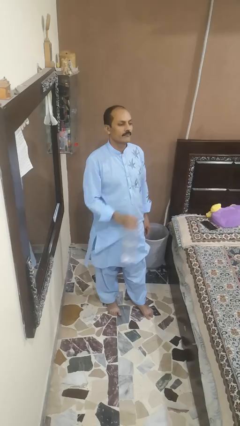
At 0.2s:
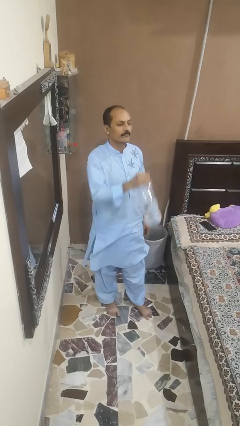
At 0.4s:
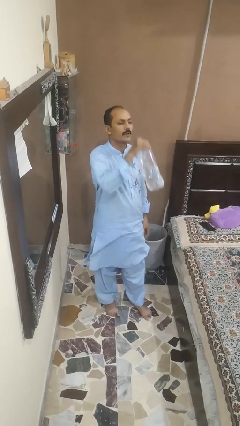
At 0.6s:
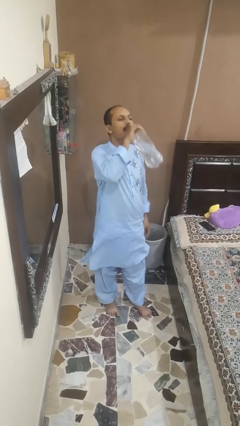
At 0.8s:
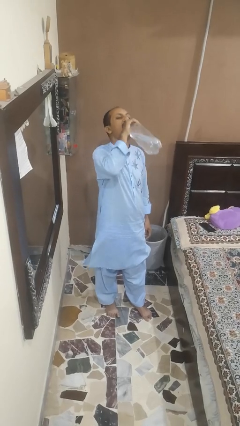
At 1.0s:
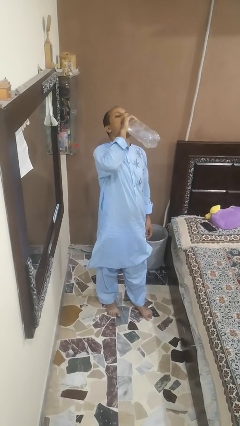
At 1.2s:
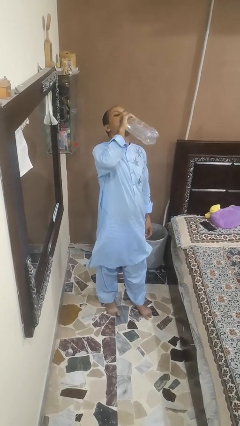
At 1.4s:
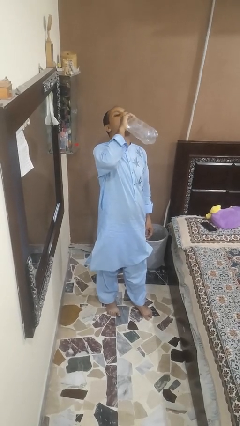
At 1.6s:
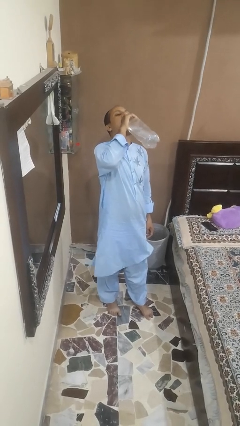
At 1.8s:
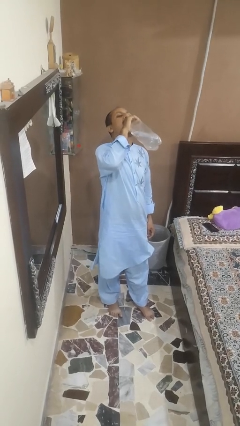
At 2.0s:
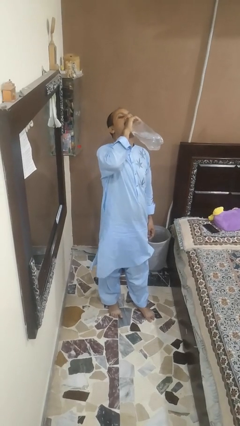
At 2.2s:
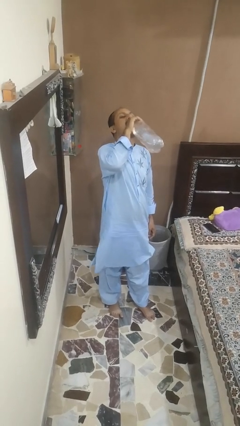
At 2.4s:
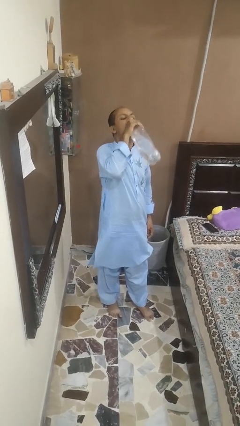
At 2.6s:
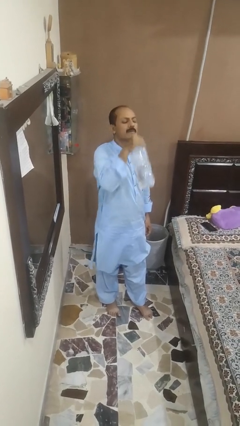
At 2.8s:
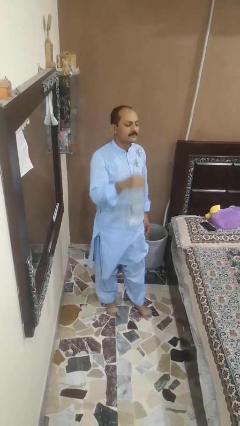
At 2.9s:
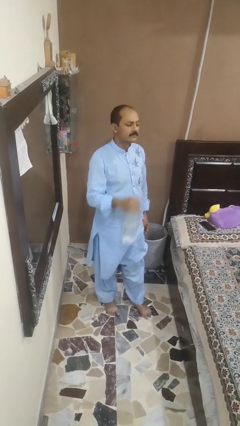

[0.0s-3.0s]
person drinks from bottle

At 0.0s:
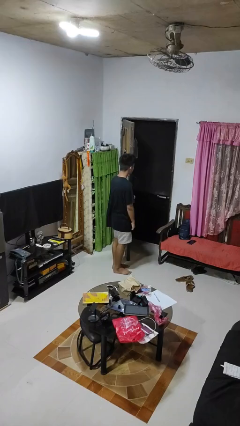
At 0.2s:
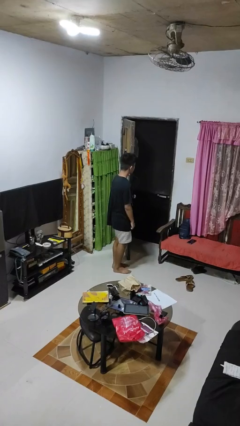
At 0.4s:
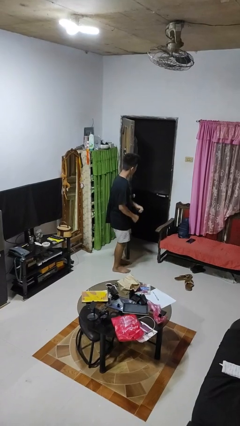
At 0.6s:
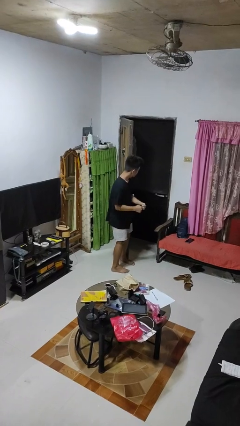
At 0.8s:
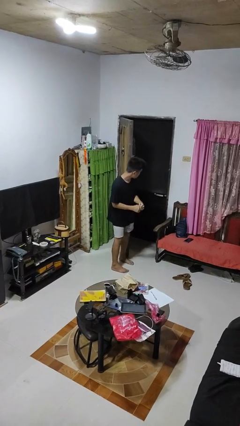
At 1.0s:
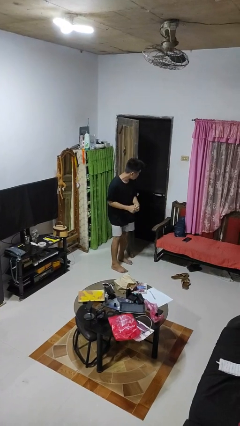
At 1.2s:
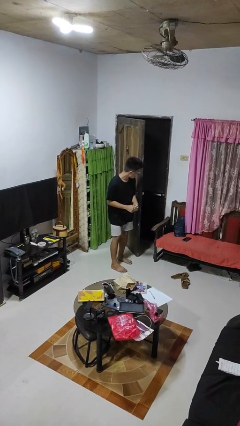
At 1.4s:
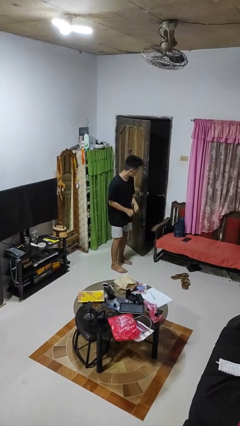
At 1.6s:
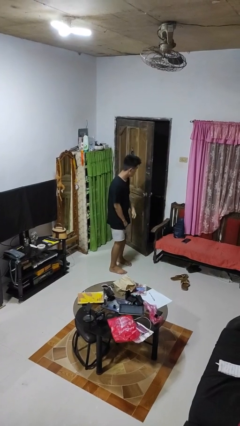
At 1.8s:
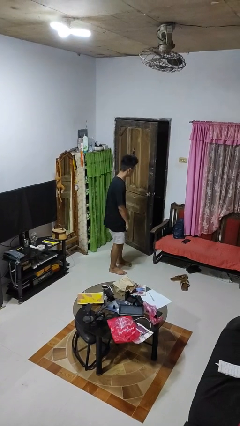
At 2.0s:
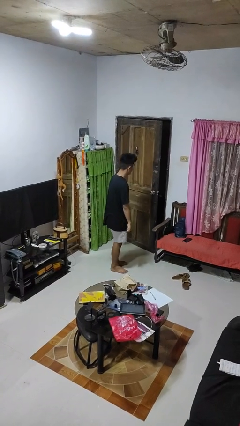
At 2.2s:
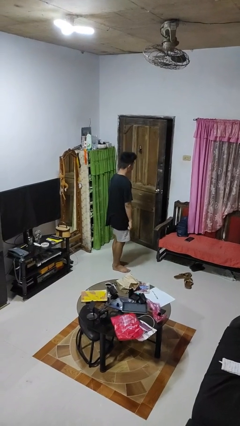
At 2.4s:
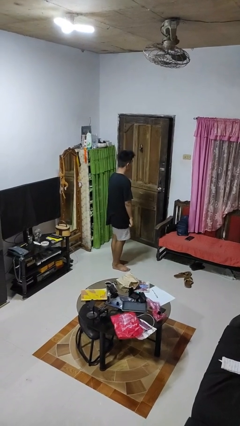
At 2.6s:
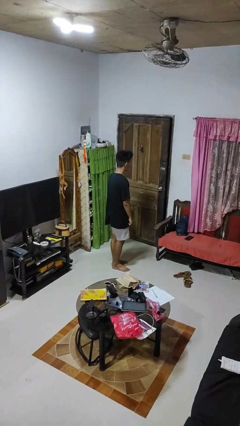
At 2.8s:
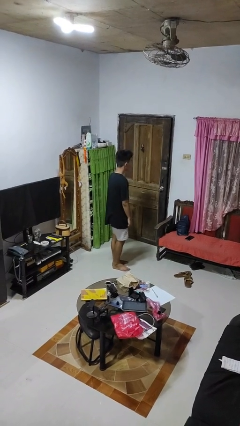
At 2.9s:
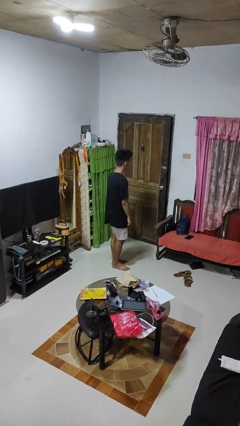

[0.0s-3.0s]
person closes door with hip

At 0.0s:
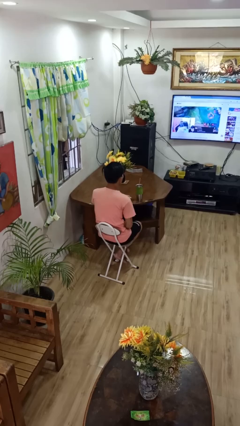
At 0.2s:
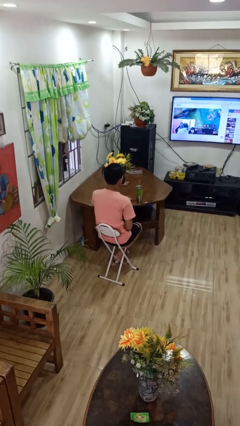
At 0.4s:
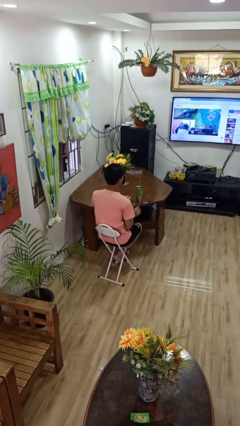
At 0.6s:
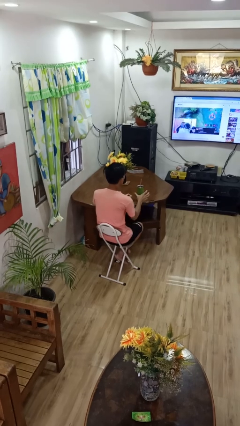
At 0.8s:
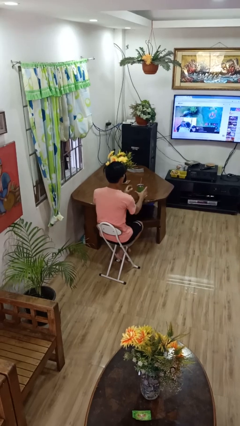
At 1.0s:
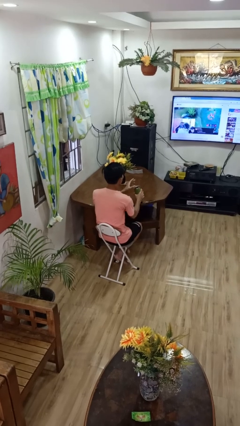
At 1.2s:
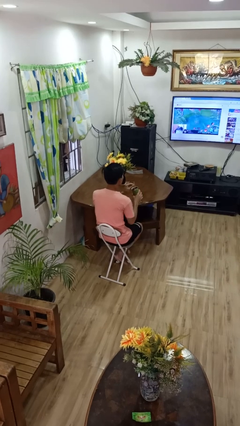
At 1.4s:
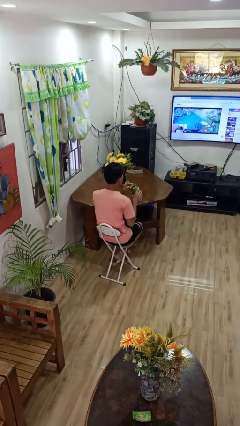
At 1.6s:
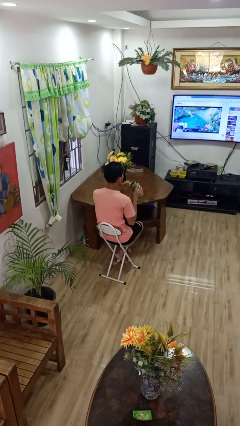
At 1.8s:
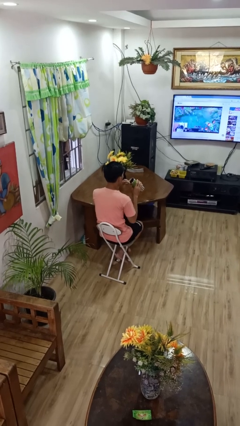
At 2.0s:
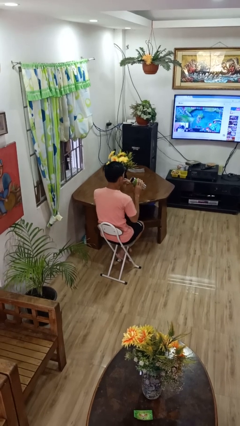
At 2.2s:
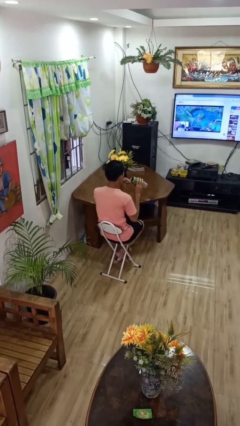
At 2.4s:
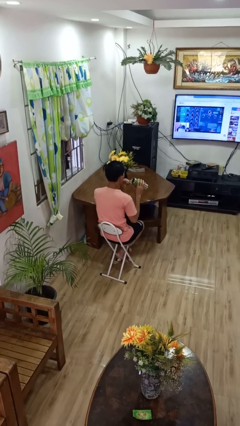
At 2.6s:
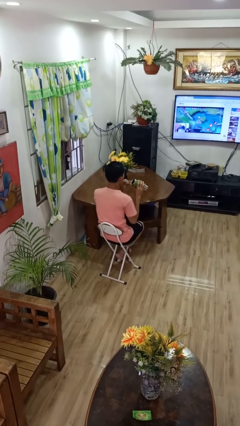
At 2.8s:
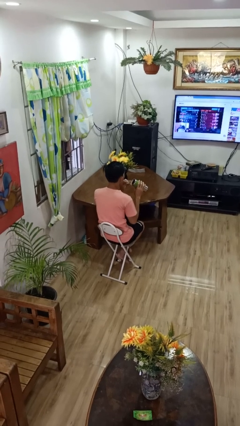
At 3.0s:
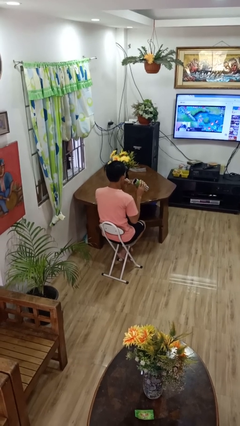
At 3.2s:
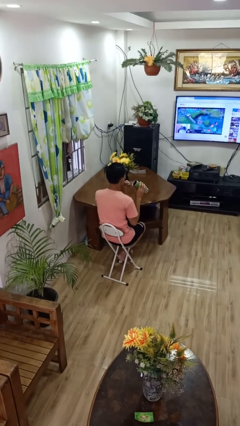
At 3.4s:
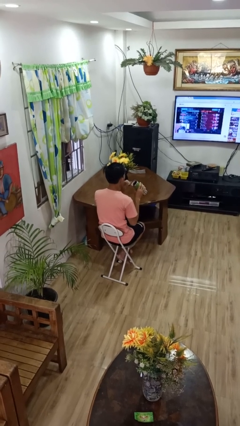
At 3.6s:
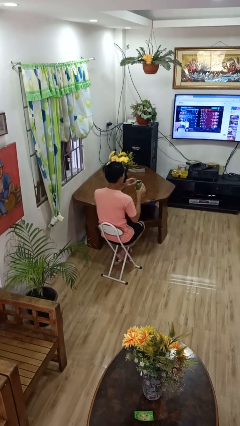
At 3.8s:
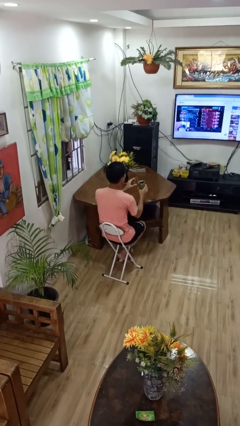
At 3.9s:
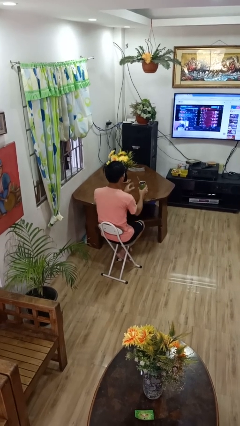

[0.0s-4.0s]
person drinks from straw

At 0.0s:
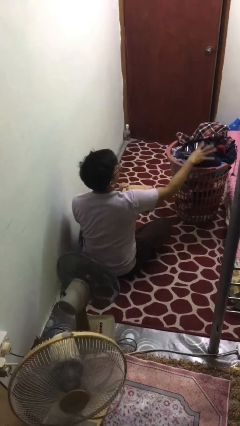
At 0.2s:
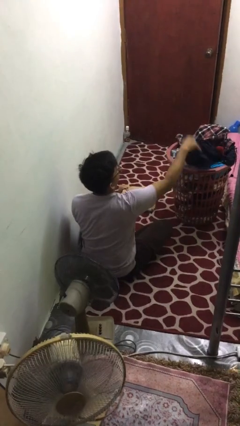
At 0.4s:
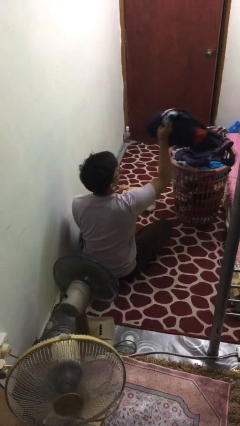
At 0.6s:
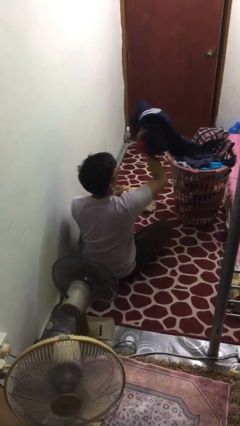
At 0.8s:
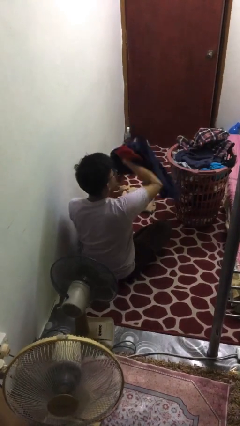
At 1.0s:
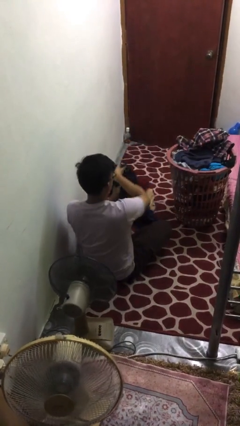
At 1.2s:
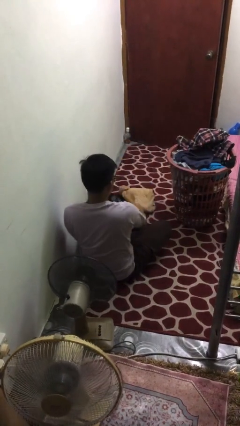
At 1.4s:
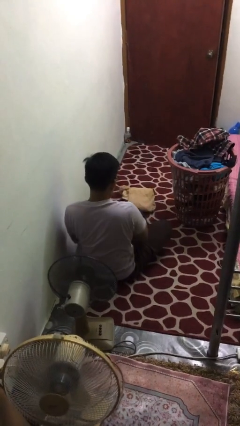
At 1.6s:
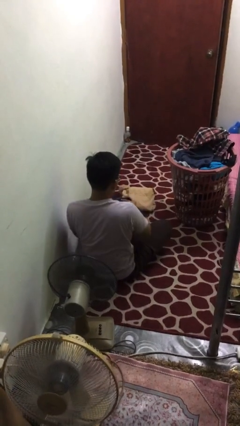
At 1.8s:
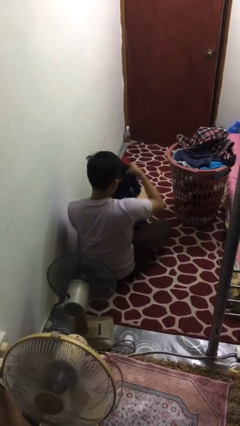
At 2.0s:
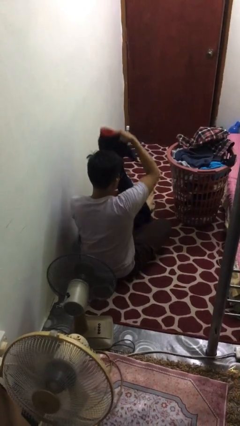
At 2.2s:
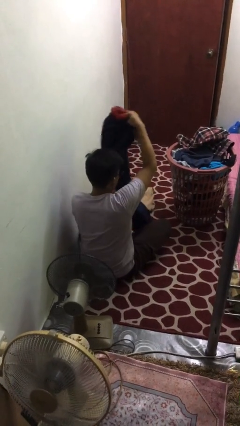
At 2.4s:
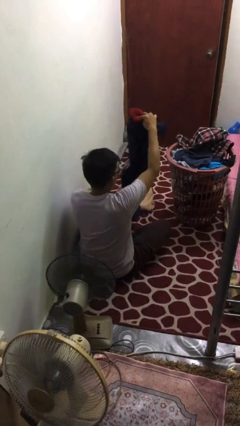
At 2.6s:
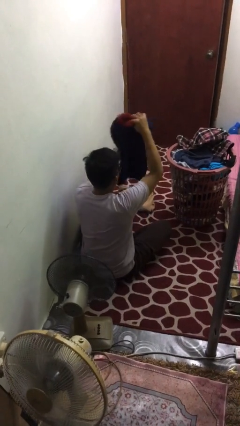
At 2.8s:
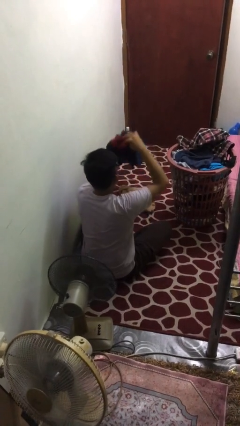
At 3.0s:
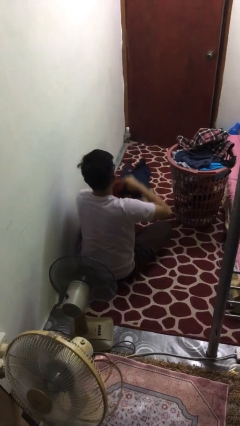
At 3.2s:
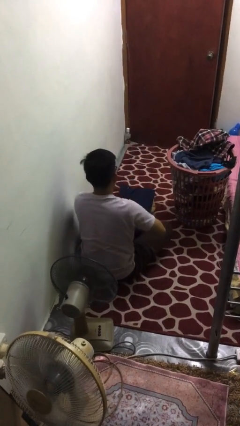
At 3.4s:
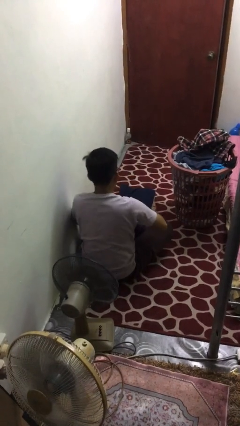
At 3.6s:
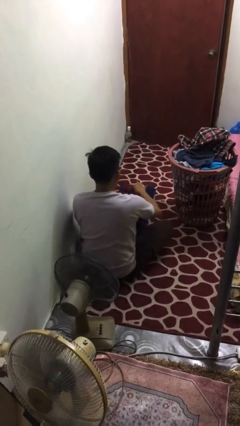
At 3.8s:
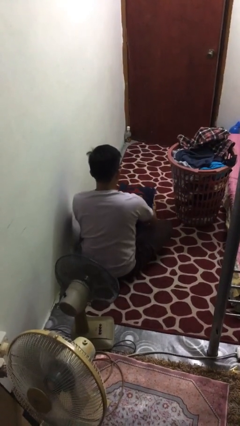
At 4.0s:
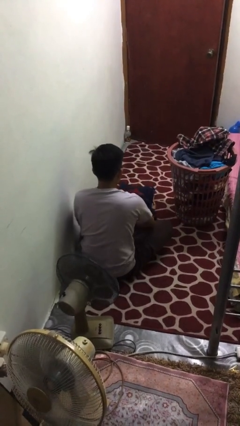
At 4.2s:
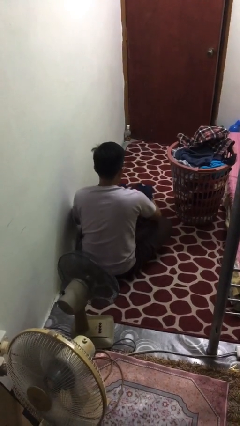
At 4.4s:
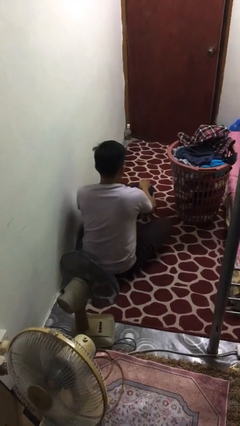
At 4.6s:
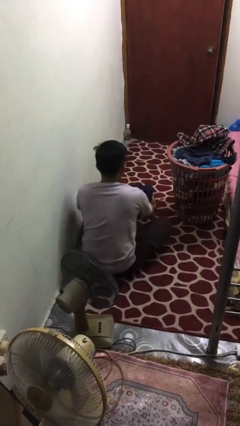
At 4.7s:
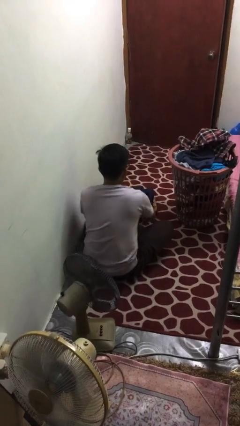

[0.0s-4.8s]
person folds pants

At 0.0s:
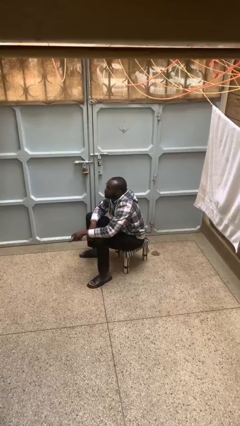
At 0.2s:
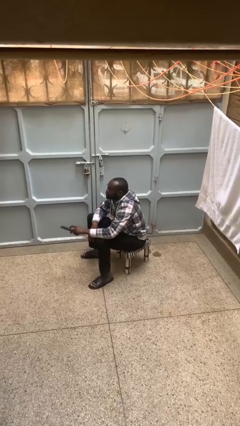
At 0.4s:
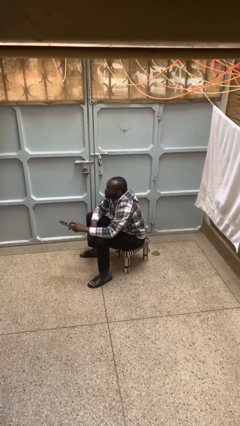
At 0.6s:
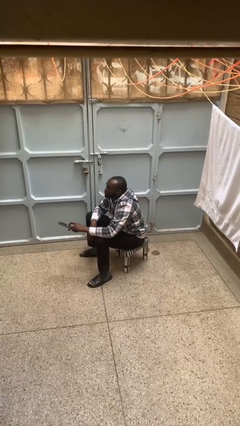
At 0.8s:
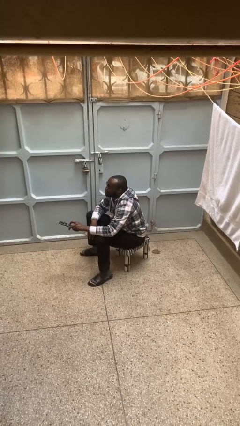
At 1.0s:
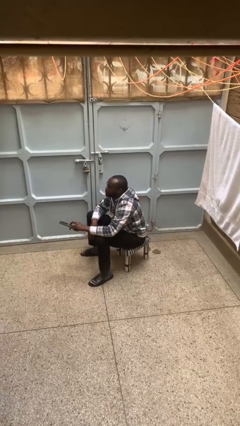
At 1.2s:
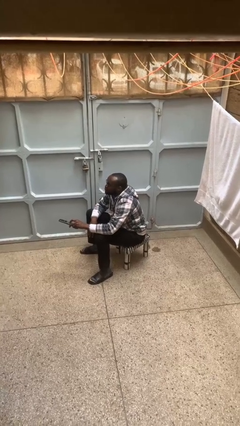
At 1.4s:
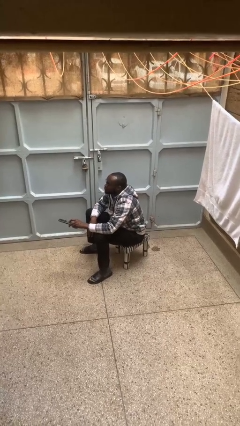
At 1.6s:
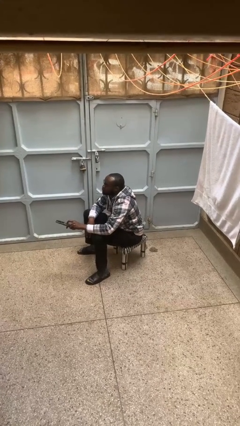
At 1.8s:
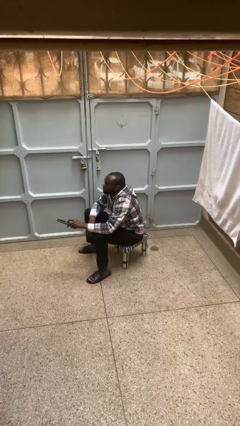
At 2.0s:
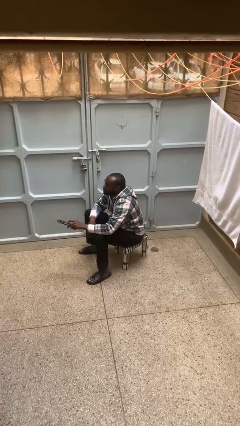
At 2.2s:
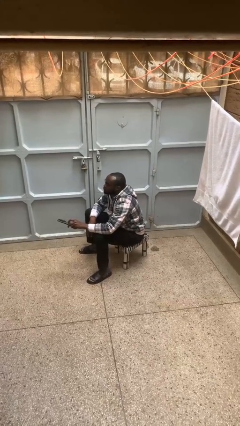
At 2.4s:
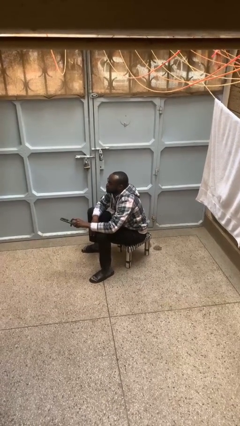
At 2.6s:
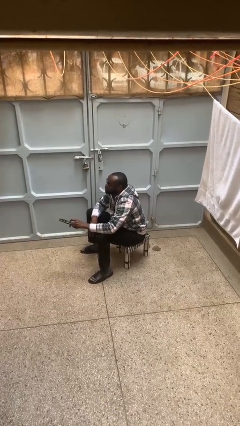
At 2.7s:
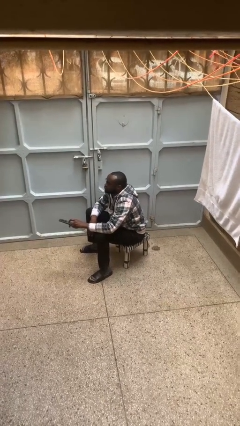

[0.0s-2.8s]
person uses television remote
